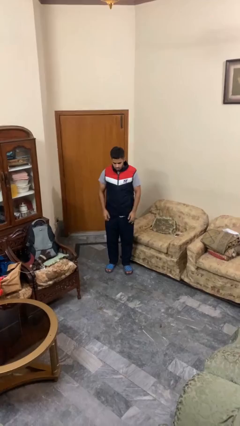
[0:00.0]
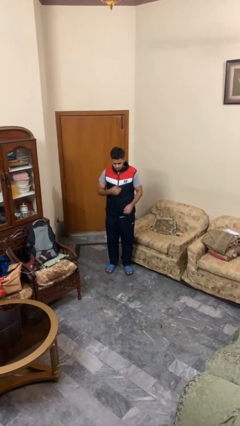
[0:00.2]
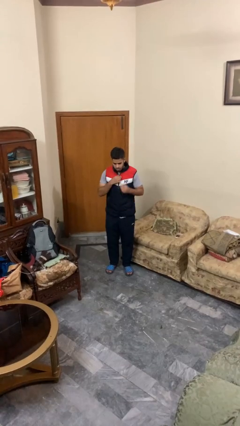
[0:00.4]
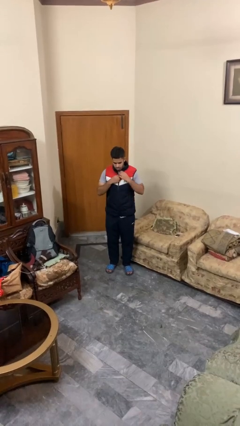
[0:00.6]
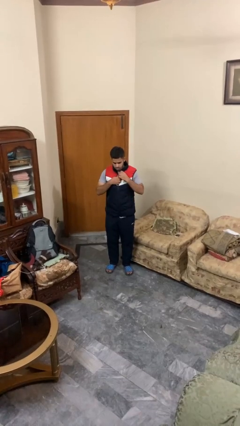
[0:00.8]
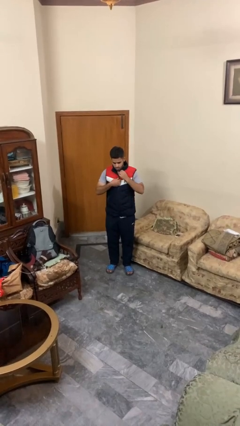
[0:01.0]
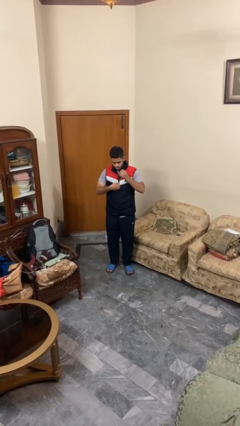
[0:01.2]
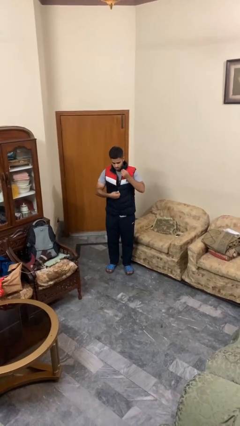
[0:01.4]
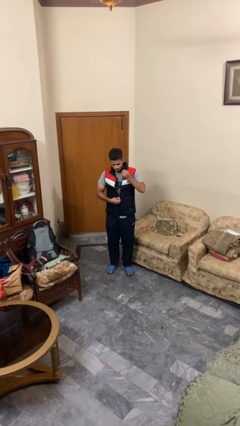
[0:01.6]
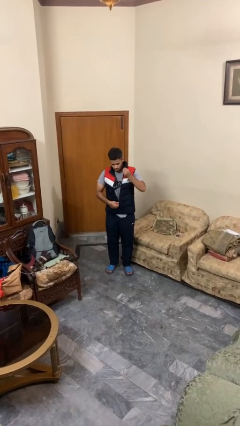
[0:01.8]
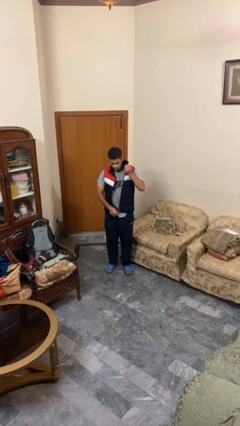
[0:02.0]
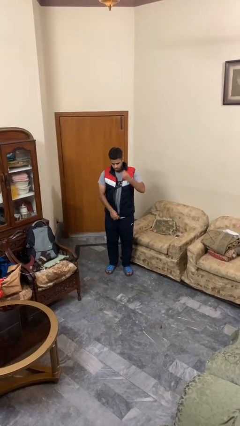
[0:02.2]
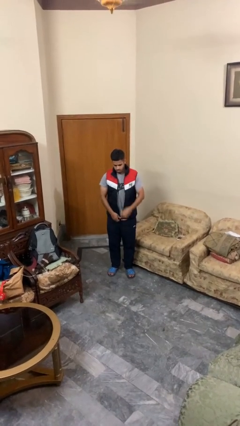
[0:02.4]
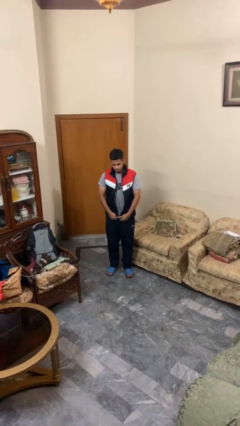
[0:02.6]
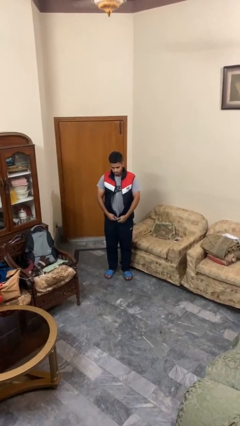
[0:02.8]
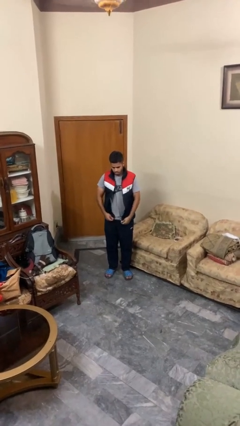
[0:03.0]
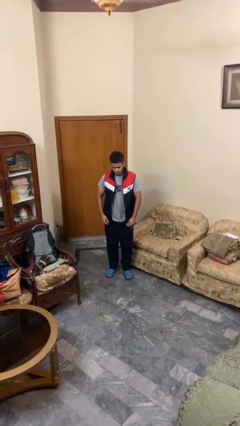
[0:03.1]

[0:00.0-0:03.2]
person unzips jacket

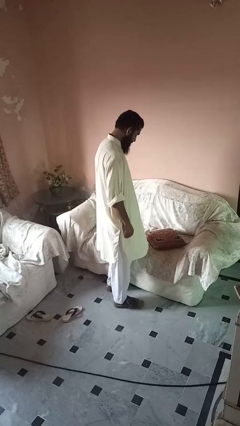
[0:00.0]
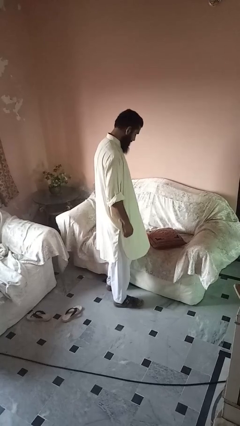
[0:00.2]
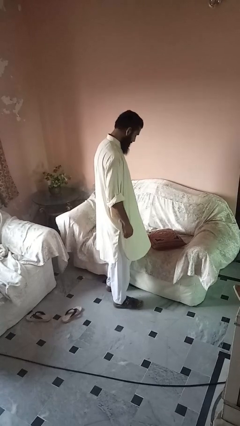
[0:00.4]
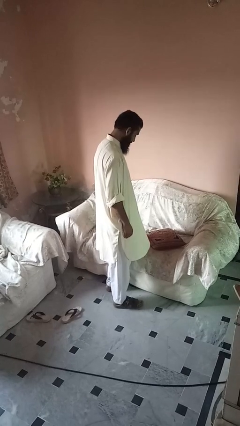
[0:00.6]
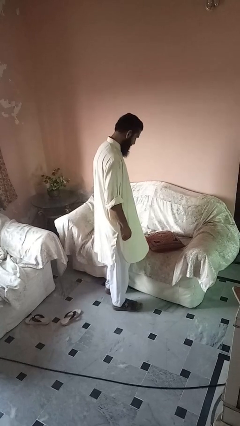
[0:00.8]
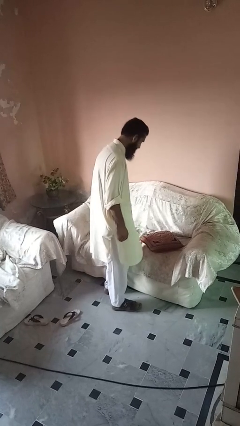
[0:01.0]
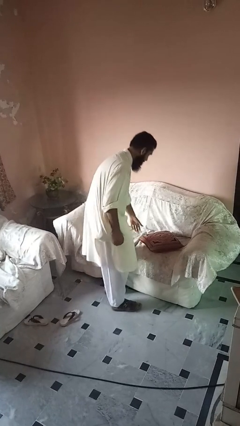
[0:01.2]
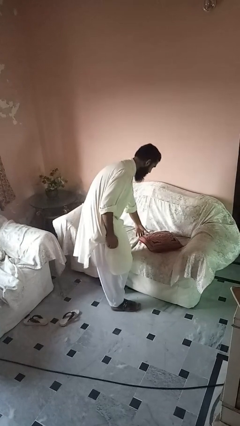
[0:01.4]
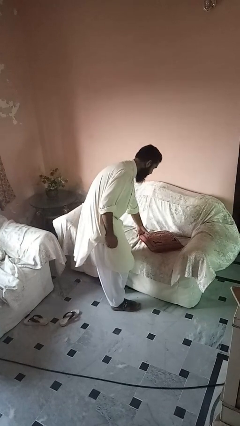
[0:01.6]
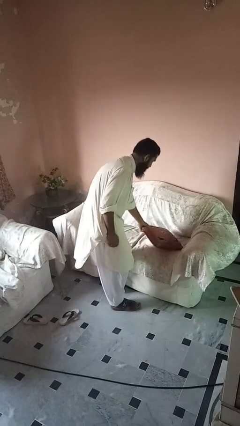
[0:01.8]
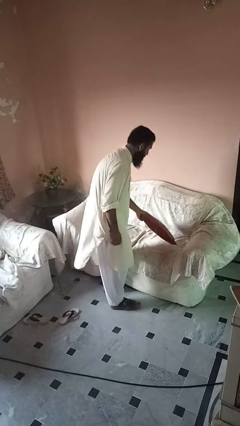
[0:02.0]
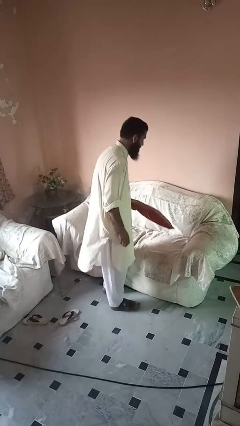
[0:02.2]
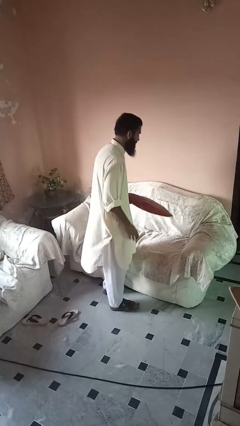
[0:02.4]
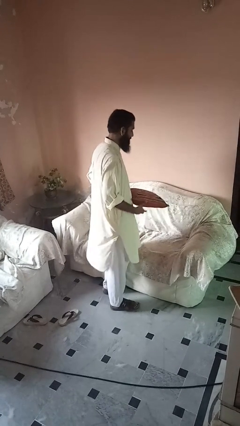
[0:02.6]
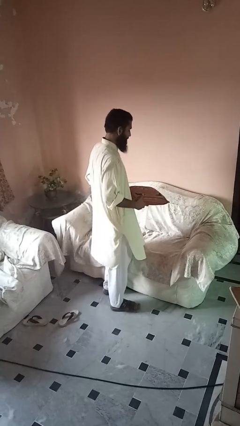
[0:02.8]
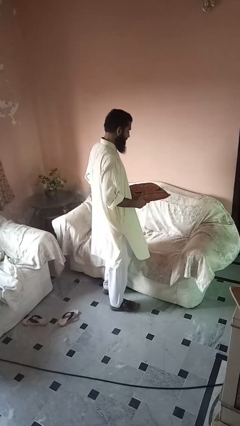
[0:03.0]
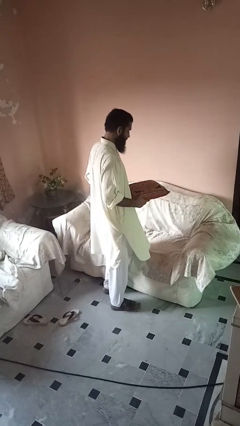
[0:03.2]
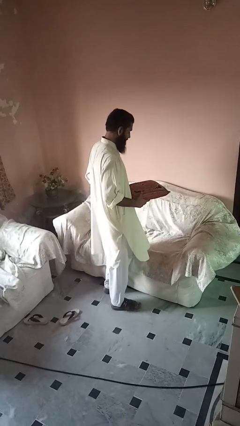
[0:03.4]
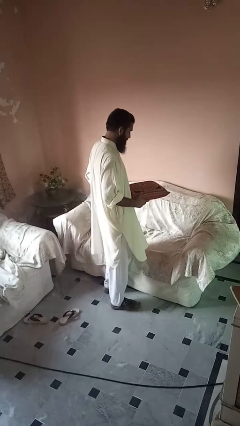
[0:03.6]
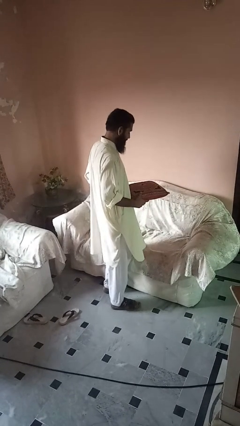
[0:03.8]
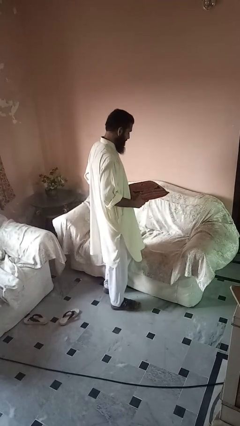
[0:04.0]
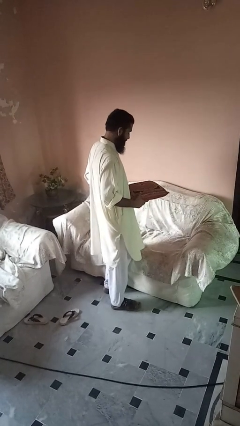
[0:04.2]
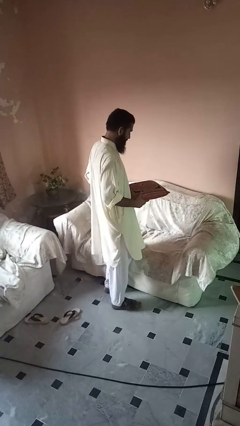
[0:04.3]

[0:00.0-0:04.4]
person picks up object from couch

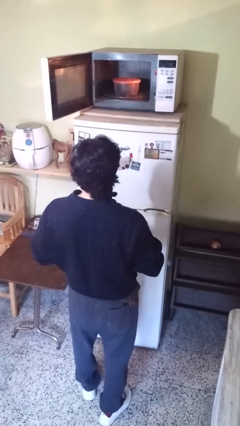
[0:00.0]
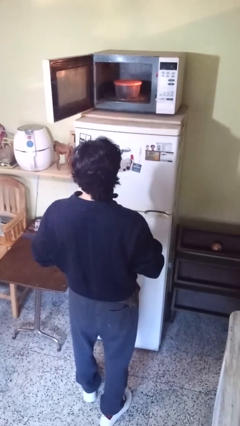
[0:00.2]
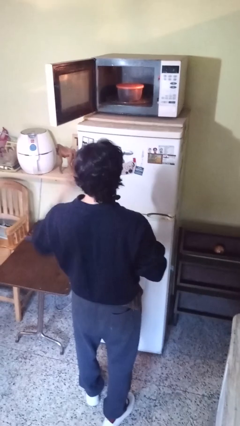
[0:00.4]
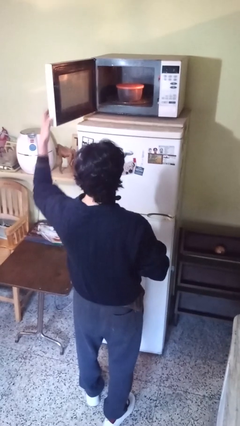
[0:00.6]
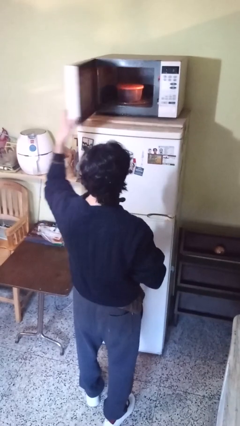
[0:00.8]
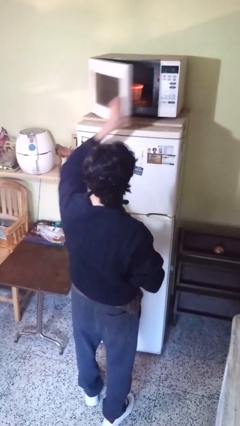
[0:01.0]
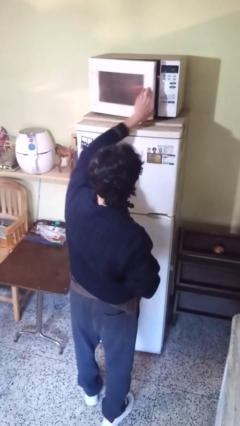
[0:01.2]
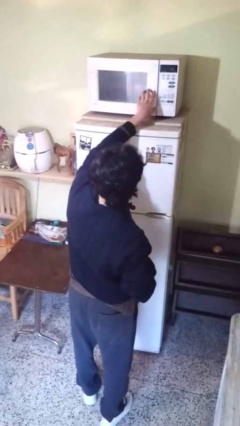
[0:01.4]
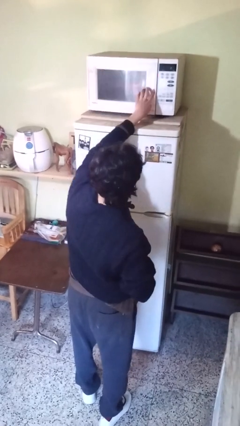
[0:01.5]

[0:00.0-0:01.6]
person closes microwave

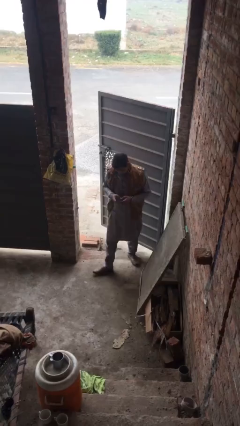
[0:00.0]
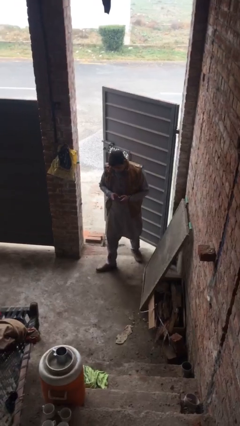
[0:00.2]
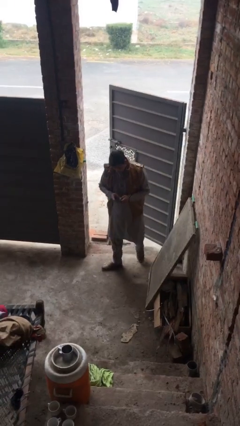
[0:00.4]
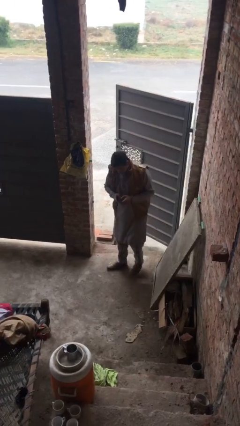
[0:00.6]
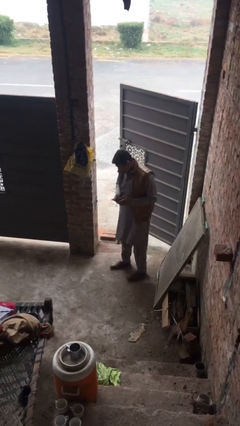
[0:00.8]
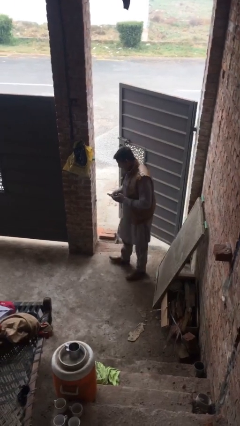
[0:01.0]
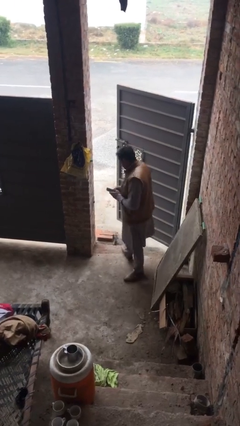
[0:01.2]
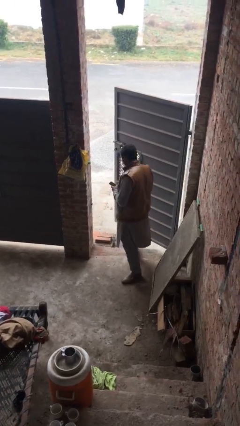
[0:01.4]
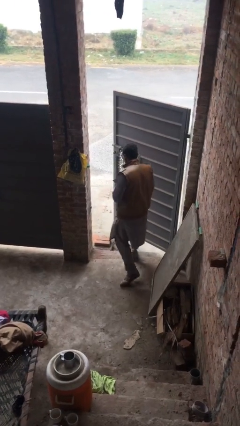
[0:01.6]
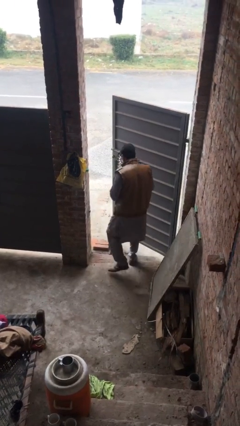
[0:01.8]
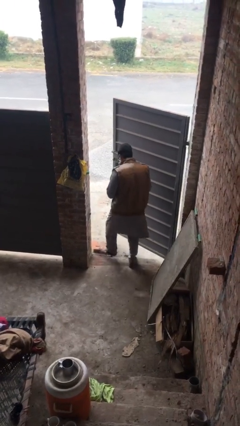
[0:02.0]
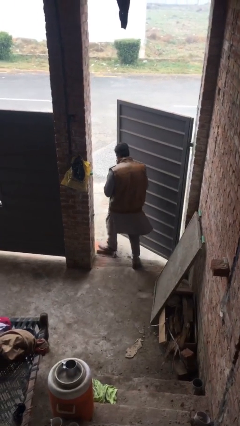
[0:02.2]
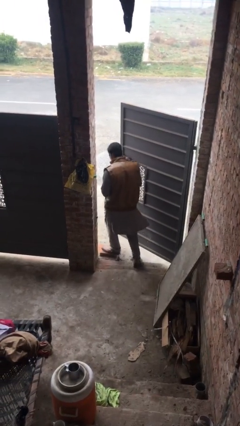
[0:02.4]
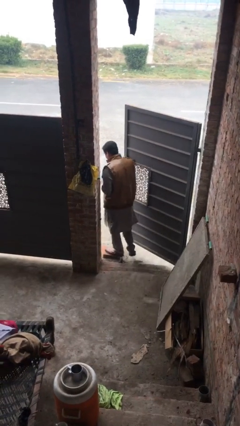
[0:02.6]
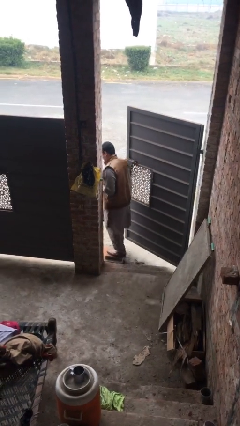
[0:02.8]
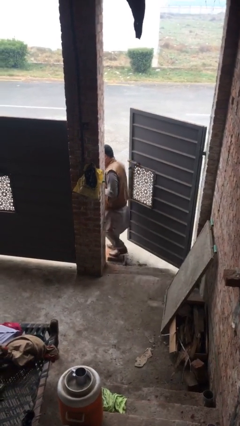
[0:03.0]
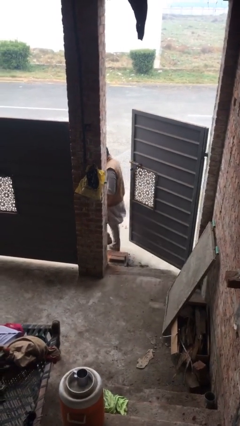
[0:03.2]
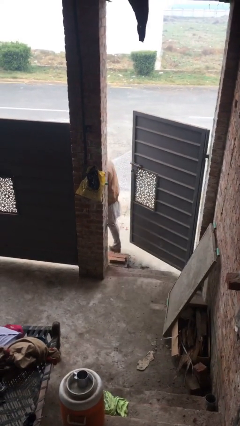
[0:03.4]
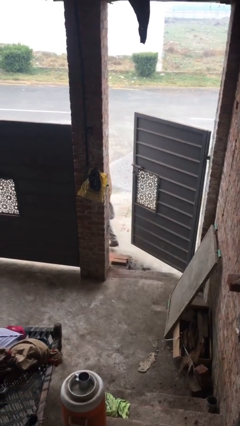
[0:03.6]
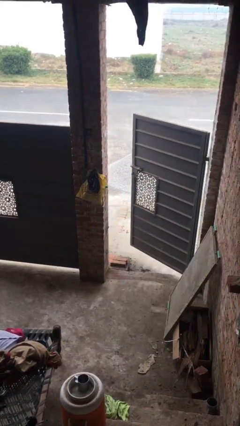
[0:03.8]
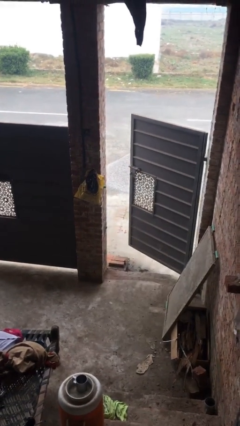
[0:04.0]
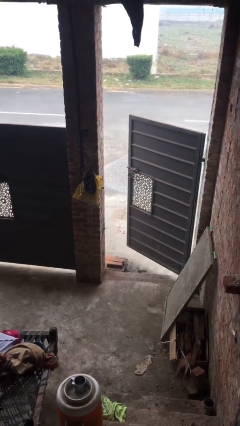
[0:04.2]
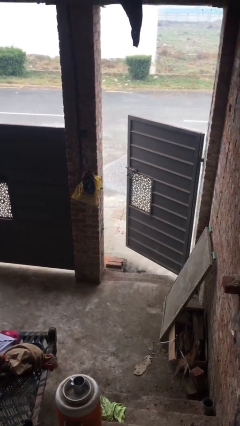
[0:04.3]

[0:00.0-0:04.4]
person exits scene through structure

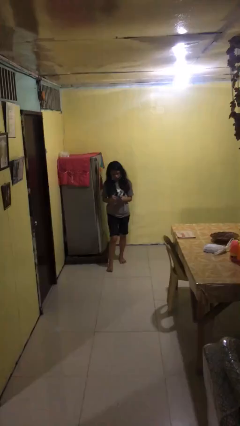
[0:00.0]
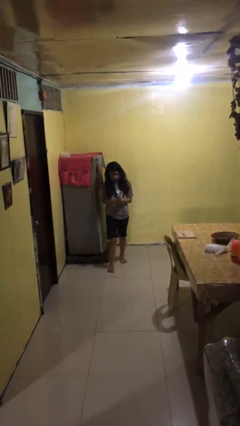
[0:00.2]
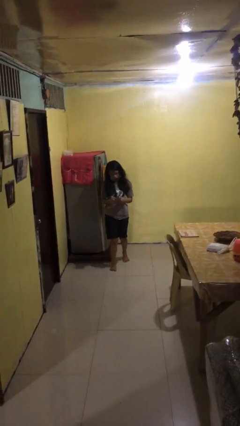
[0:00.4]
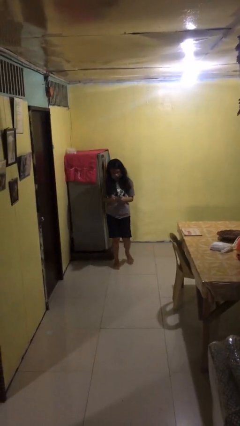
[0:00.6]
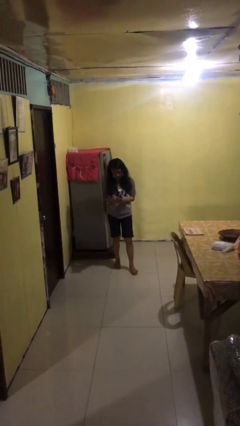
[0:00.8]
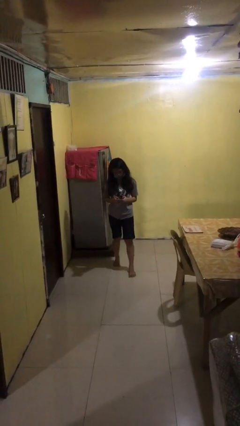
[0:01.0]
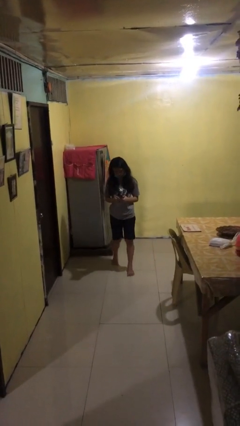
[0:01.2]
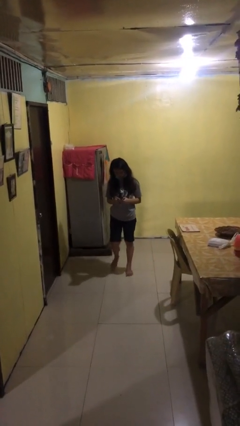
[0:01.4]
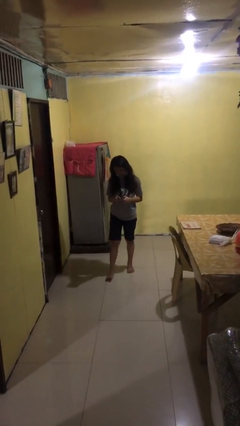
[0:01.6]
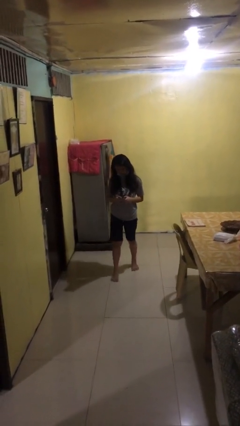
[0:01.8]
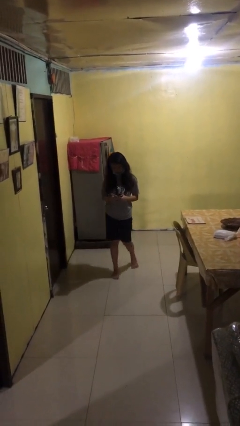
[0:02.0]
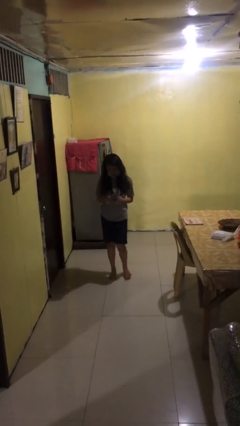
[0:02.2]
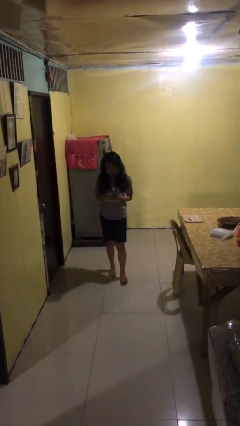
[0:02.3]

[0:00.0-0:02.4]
person texts on phone

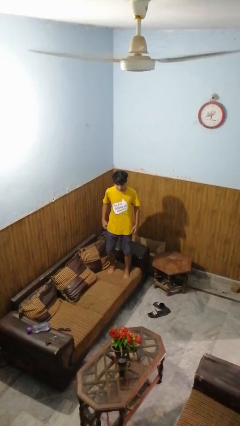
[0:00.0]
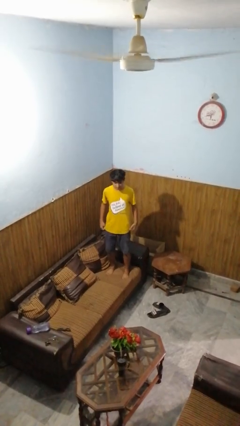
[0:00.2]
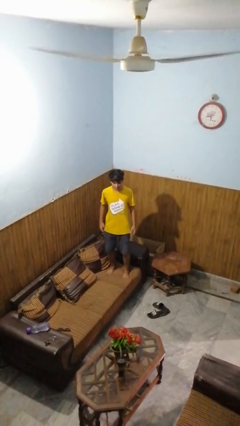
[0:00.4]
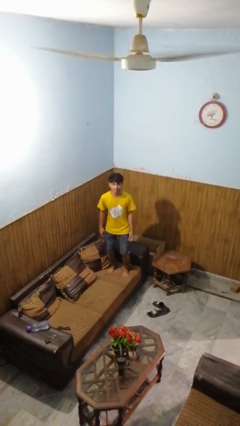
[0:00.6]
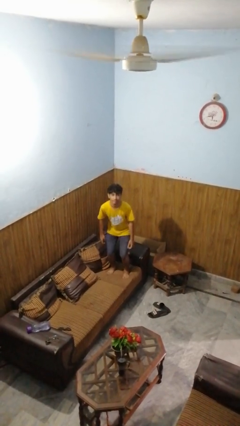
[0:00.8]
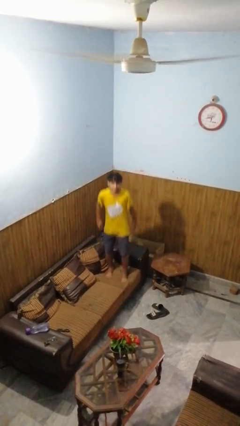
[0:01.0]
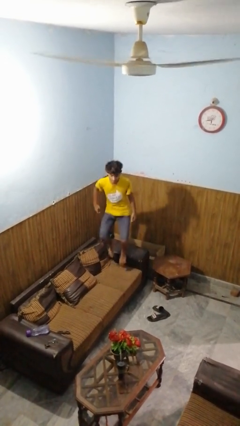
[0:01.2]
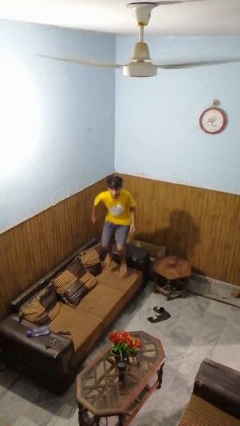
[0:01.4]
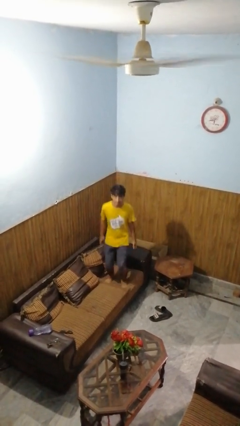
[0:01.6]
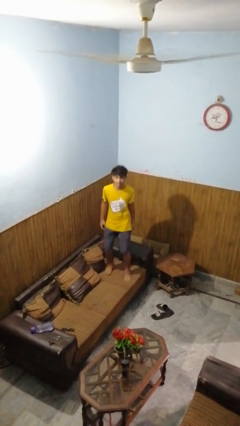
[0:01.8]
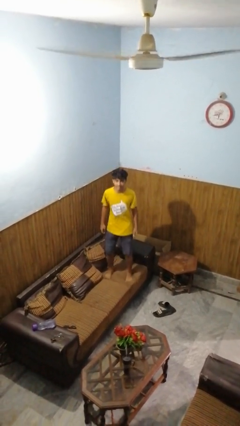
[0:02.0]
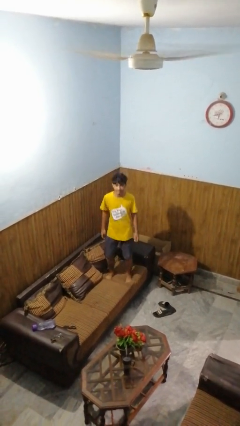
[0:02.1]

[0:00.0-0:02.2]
person jumps on couch
